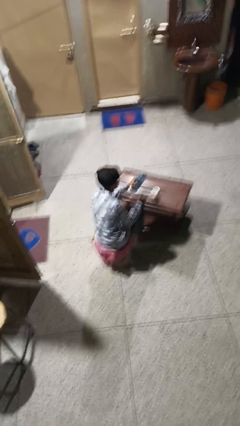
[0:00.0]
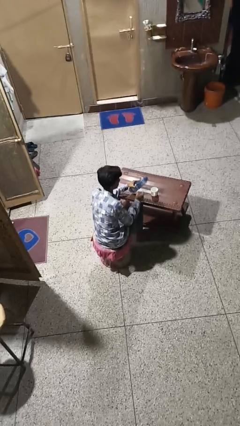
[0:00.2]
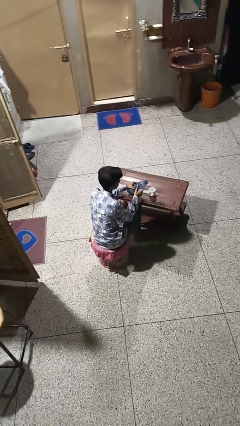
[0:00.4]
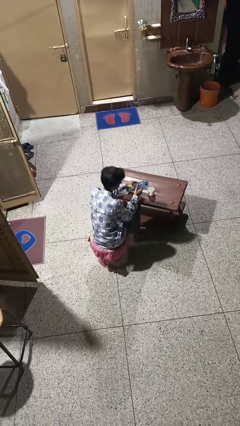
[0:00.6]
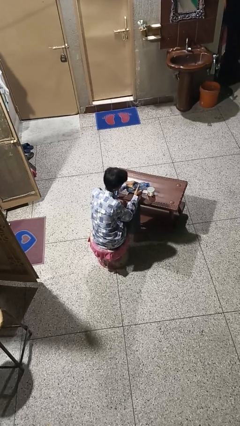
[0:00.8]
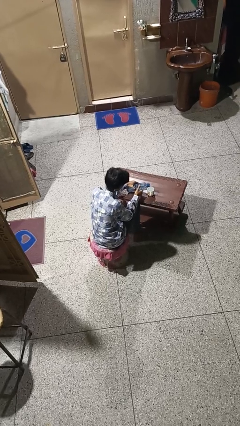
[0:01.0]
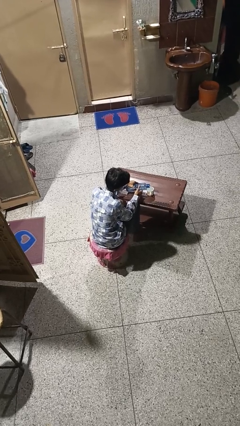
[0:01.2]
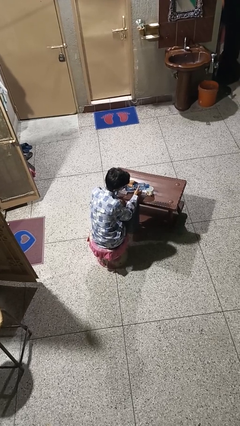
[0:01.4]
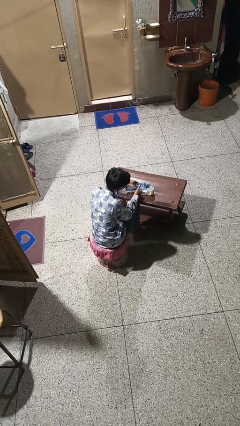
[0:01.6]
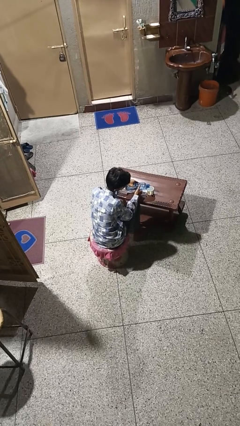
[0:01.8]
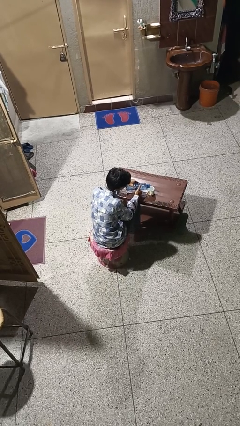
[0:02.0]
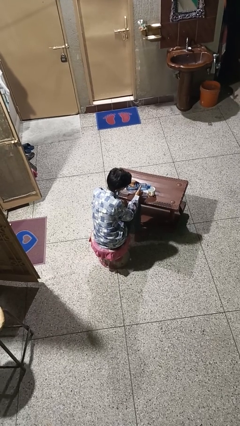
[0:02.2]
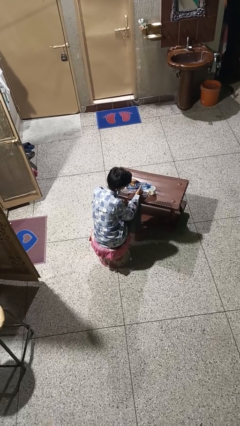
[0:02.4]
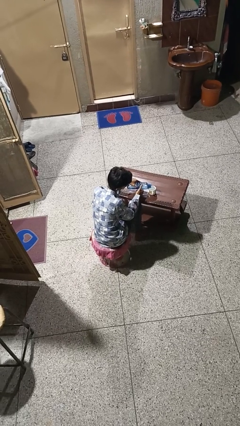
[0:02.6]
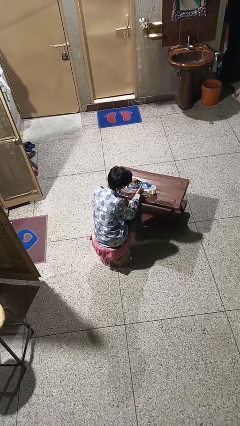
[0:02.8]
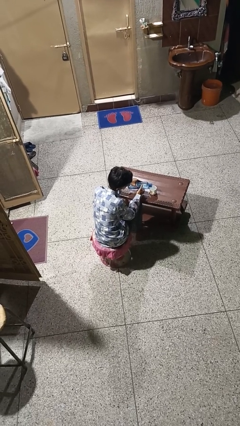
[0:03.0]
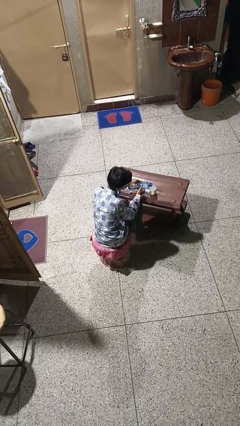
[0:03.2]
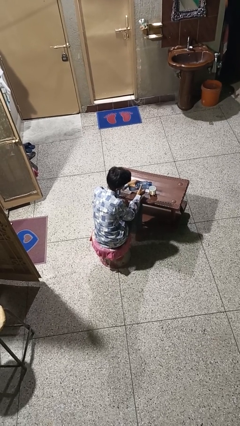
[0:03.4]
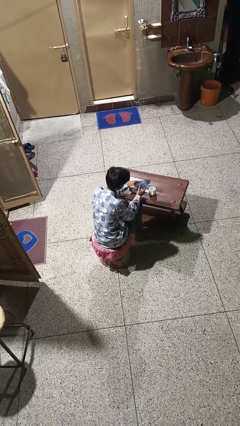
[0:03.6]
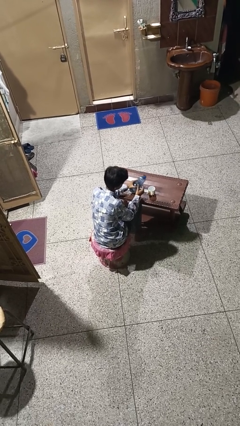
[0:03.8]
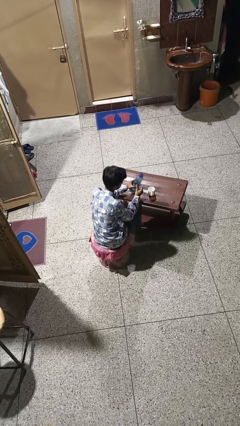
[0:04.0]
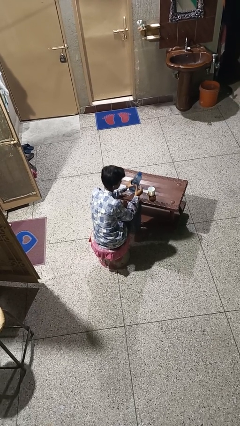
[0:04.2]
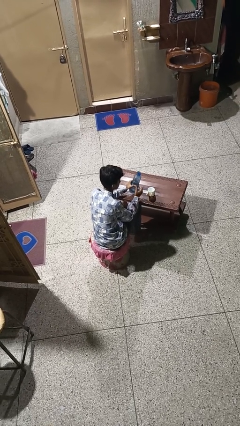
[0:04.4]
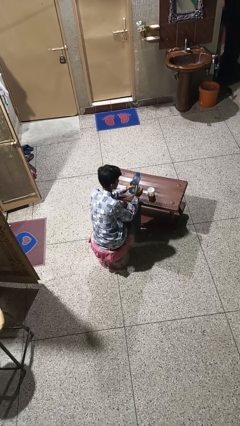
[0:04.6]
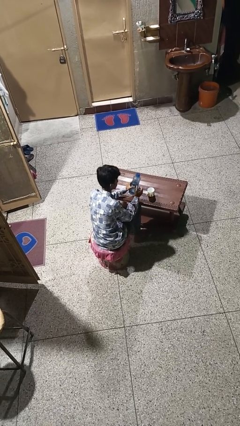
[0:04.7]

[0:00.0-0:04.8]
person pours liquid into cup

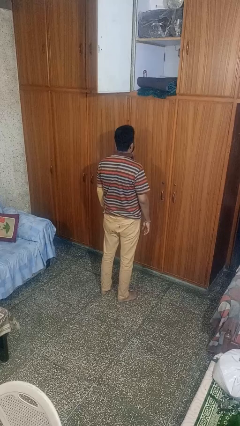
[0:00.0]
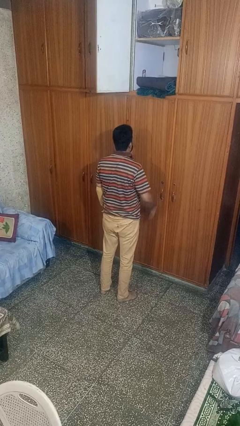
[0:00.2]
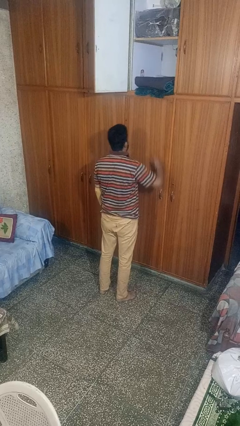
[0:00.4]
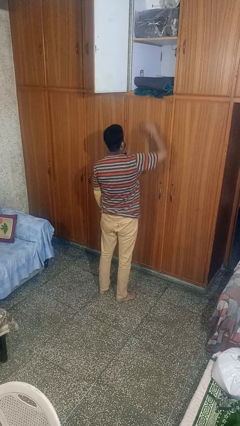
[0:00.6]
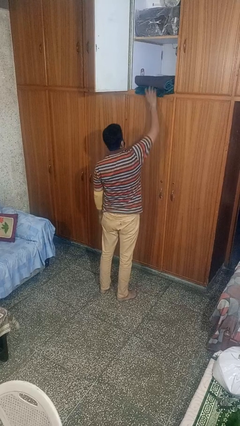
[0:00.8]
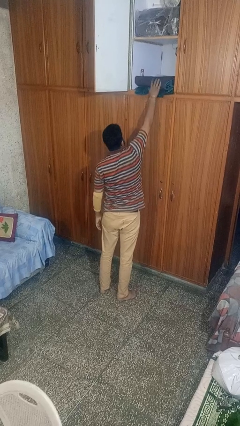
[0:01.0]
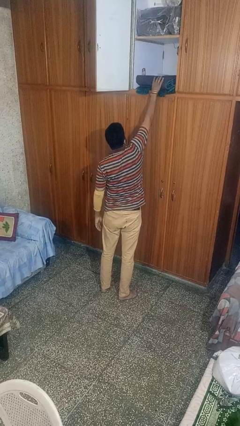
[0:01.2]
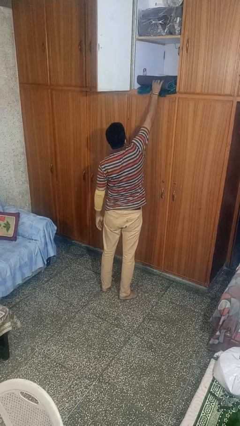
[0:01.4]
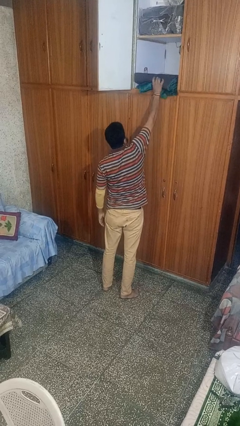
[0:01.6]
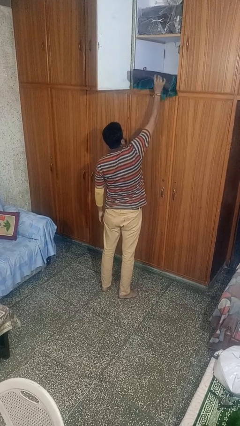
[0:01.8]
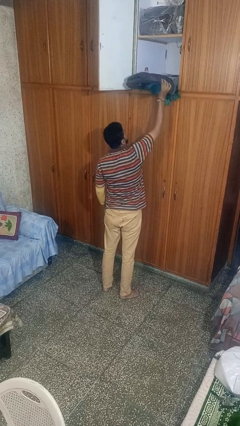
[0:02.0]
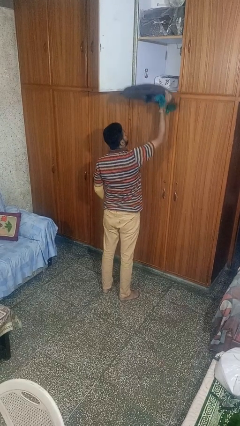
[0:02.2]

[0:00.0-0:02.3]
person picks up object from shelf

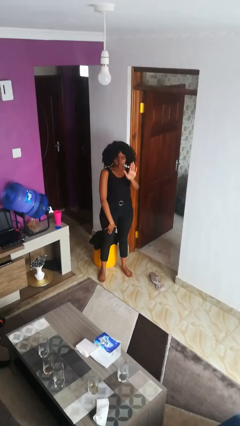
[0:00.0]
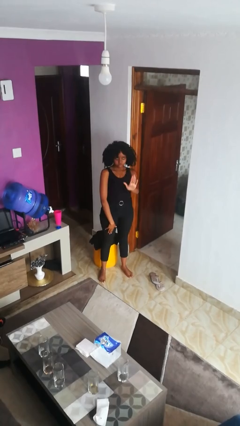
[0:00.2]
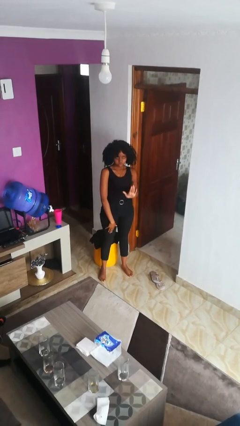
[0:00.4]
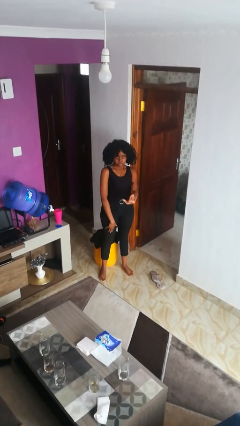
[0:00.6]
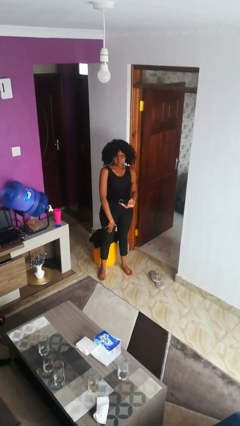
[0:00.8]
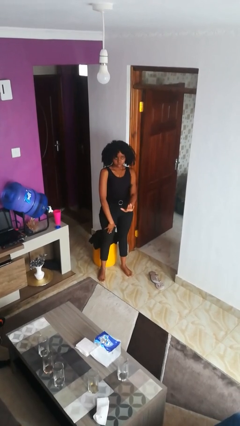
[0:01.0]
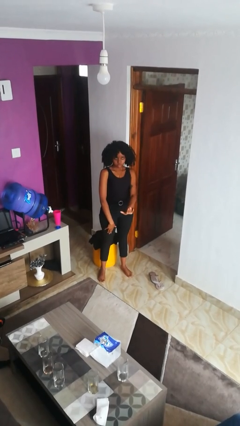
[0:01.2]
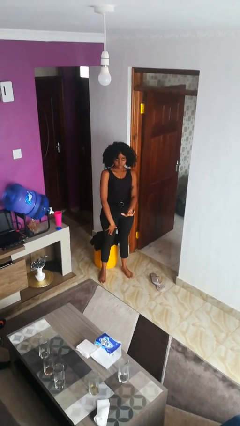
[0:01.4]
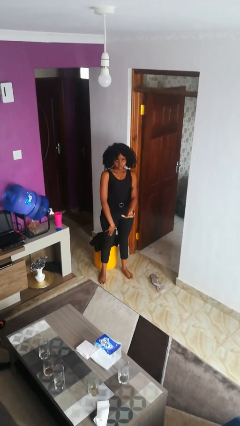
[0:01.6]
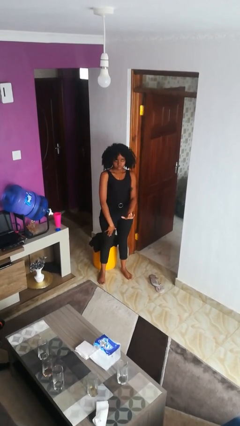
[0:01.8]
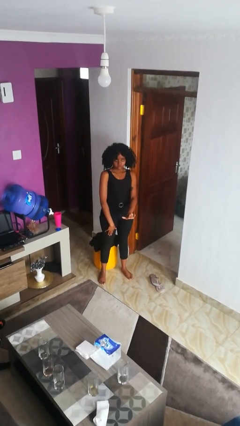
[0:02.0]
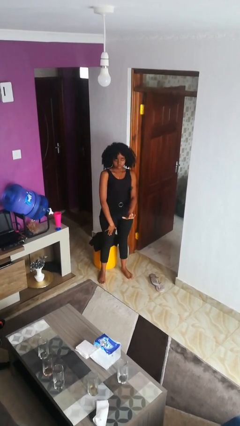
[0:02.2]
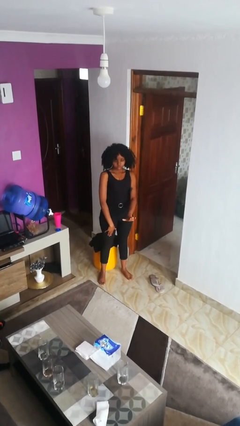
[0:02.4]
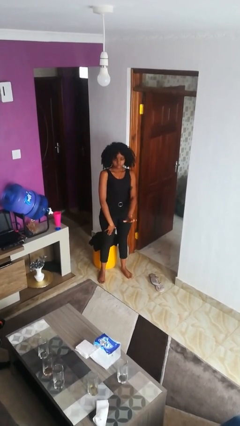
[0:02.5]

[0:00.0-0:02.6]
person gestures swipe down

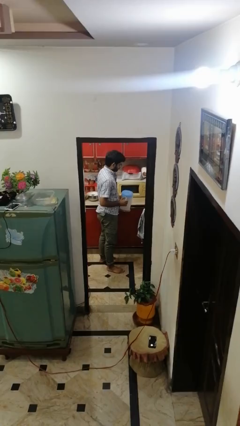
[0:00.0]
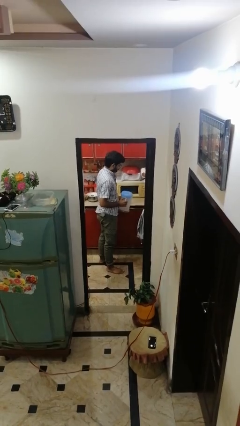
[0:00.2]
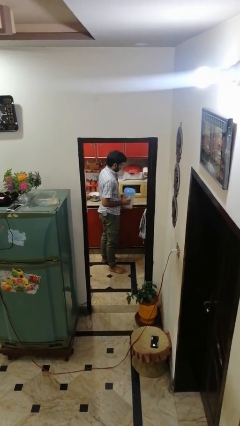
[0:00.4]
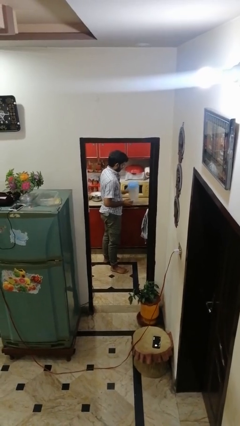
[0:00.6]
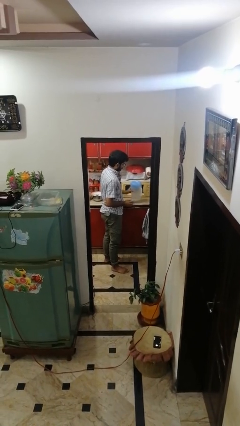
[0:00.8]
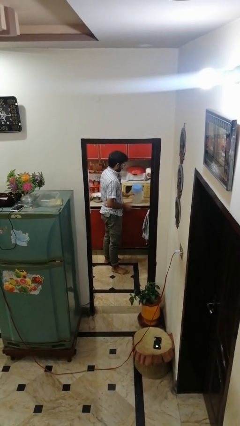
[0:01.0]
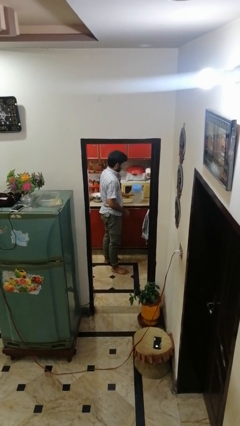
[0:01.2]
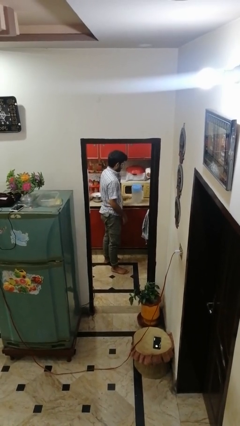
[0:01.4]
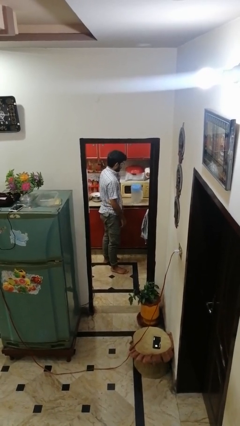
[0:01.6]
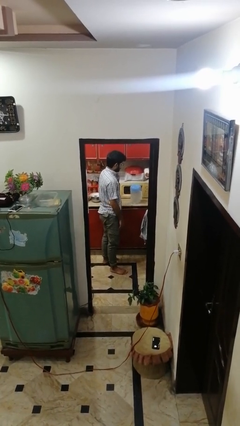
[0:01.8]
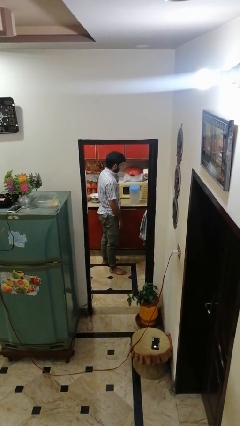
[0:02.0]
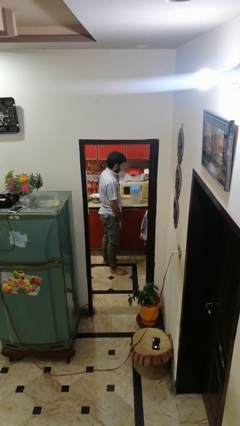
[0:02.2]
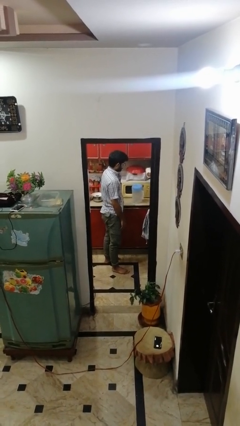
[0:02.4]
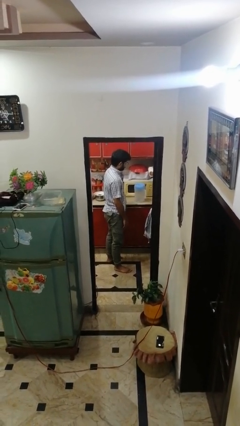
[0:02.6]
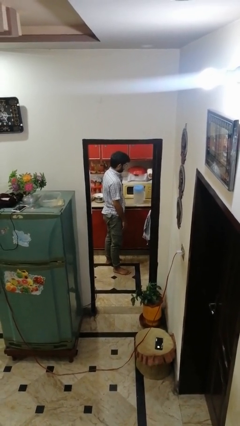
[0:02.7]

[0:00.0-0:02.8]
person puts down object on countertop

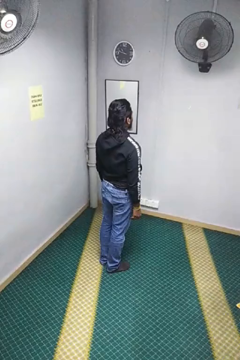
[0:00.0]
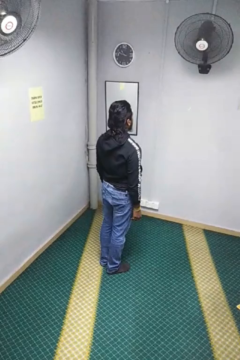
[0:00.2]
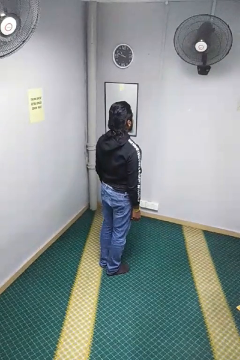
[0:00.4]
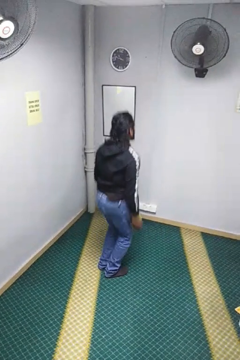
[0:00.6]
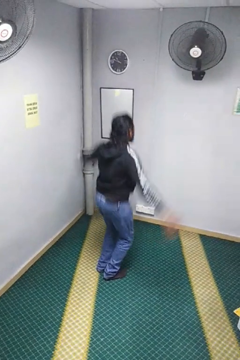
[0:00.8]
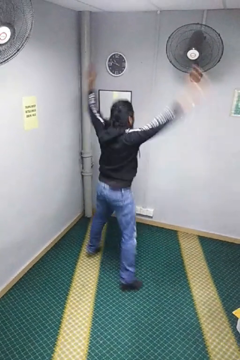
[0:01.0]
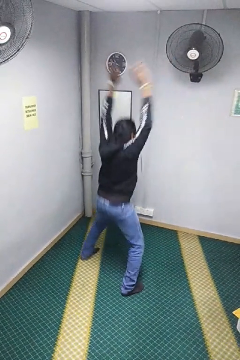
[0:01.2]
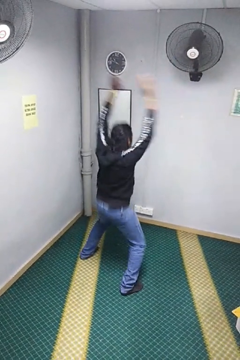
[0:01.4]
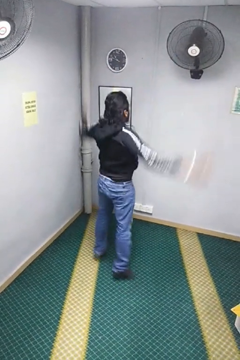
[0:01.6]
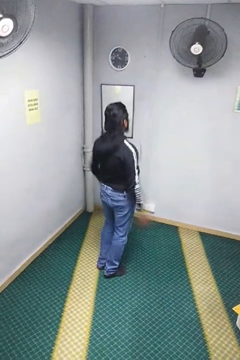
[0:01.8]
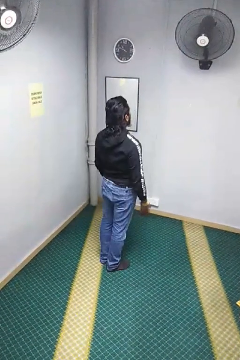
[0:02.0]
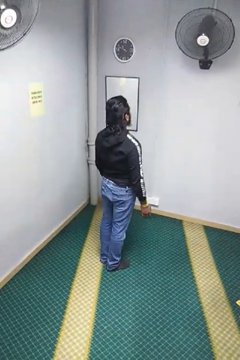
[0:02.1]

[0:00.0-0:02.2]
person exercises with jumping jacks

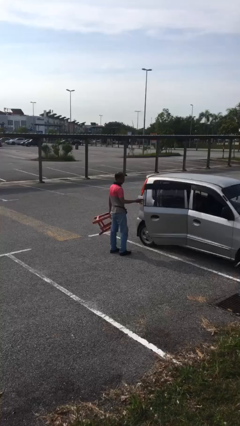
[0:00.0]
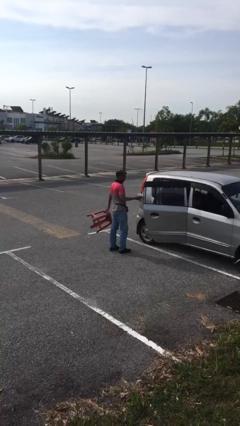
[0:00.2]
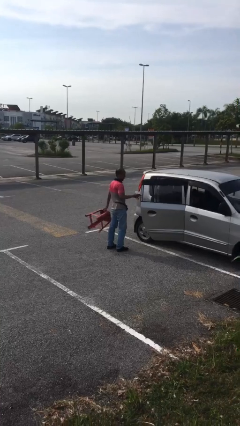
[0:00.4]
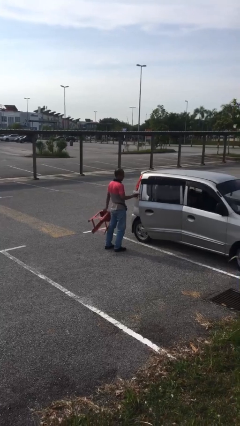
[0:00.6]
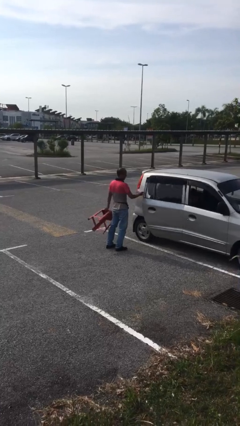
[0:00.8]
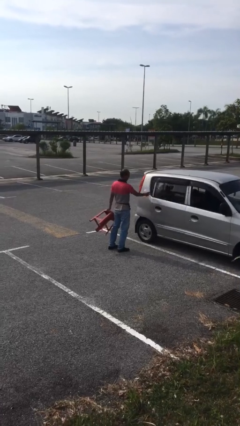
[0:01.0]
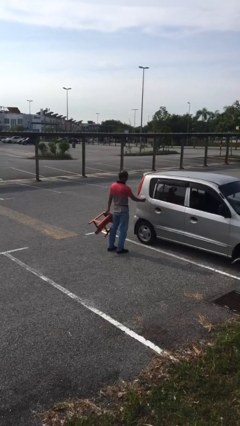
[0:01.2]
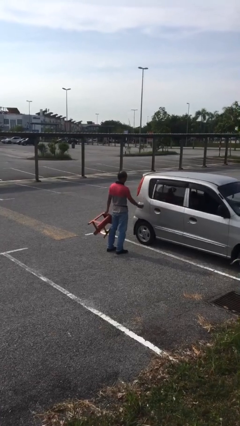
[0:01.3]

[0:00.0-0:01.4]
person closes car door

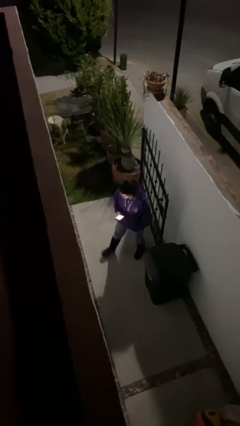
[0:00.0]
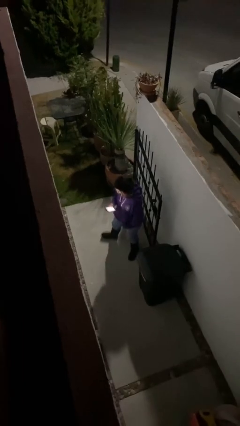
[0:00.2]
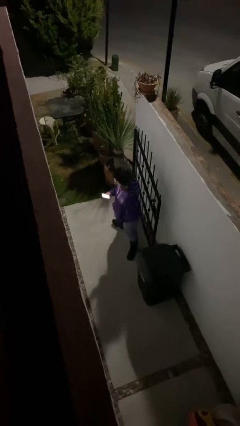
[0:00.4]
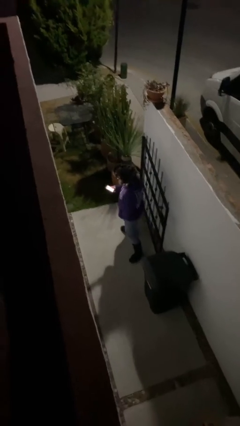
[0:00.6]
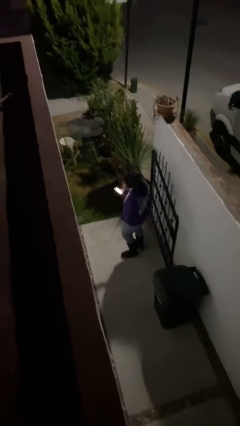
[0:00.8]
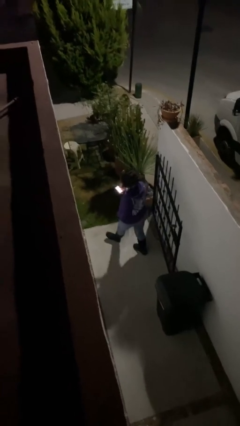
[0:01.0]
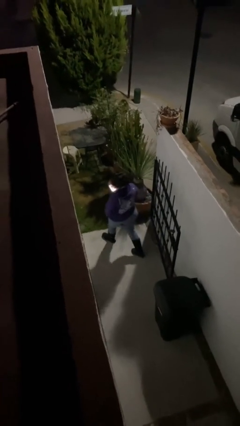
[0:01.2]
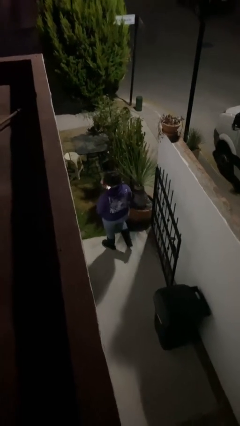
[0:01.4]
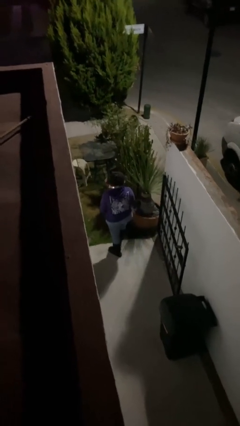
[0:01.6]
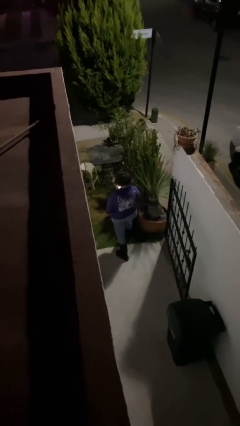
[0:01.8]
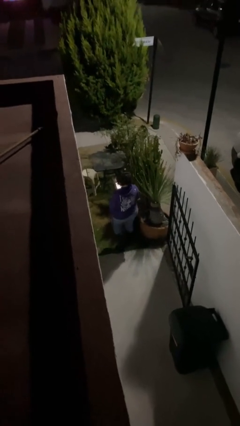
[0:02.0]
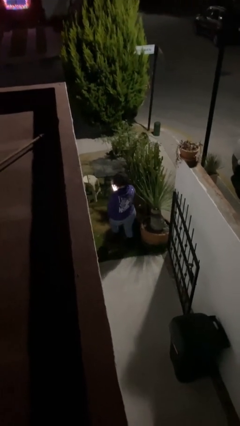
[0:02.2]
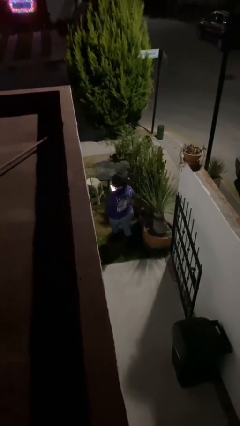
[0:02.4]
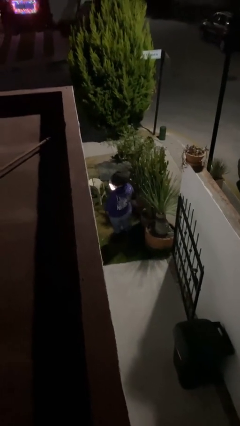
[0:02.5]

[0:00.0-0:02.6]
person exits scene through structure
